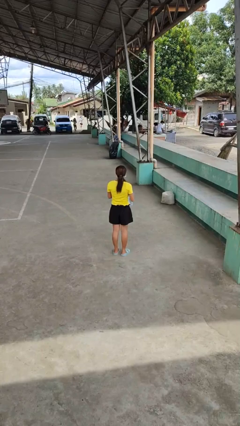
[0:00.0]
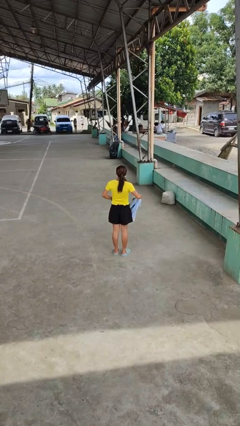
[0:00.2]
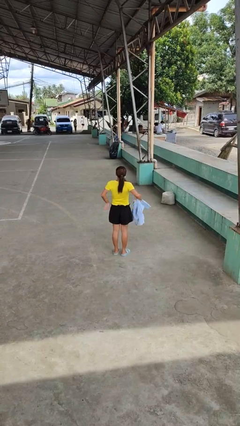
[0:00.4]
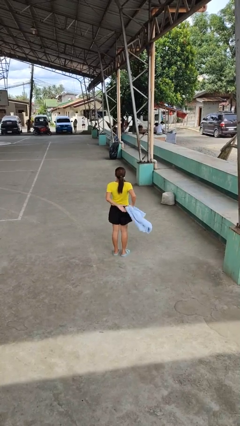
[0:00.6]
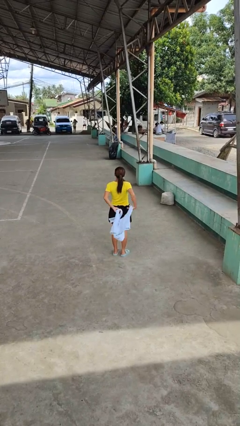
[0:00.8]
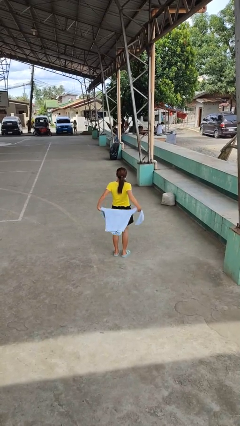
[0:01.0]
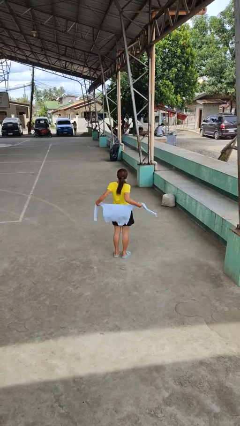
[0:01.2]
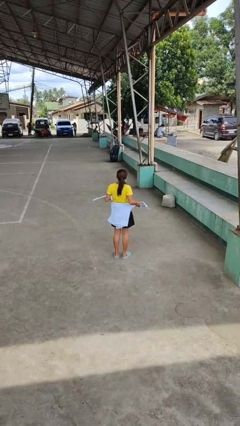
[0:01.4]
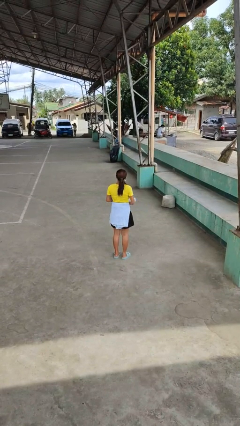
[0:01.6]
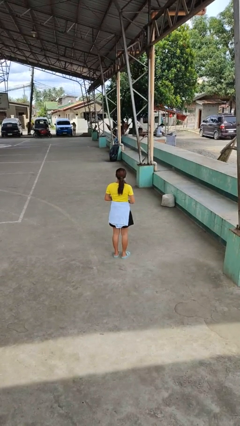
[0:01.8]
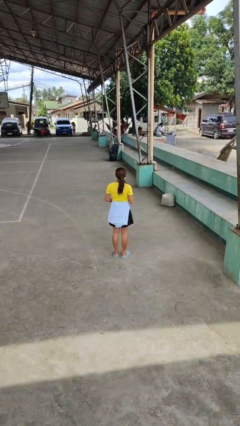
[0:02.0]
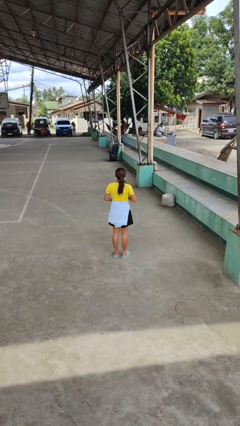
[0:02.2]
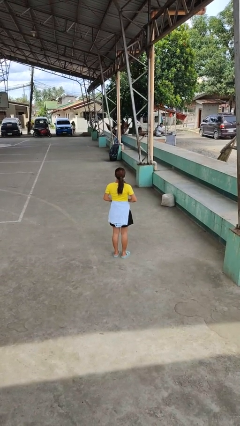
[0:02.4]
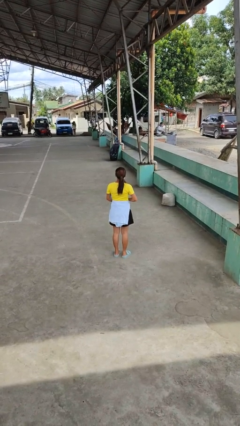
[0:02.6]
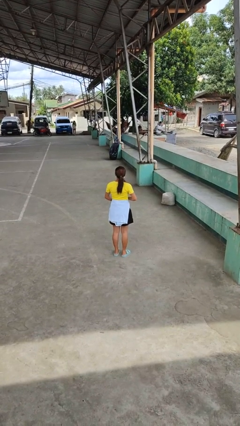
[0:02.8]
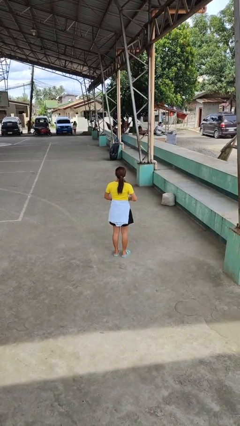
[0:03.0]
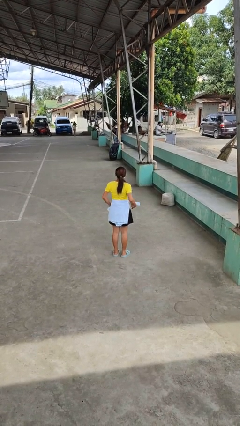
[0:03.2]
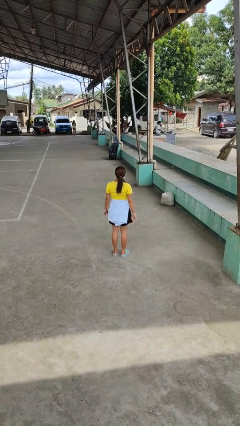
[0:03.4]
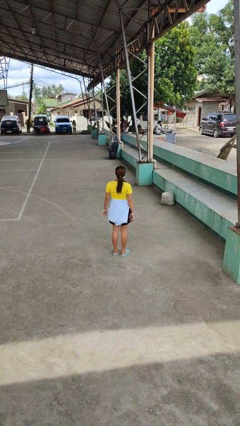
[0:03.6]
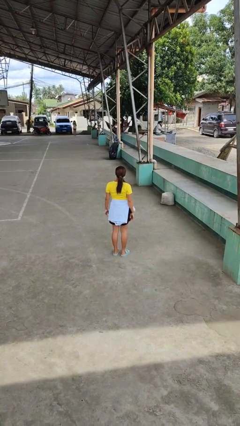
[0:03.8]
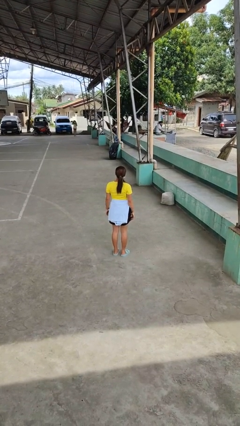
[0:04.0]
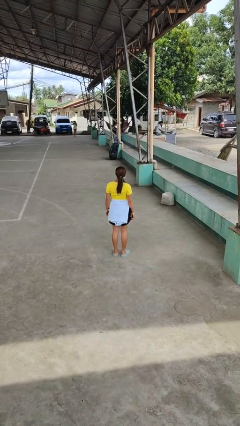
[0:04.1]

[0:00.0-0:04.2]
person ties jacket around waist

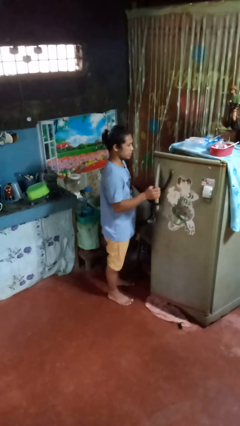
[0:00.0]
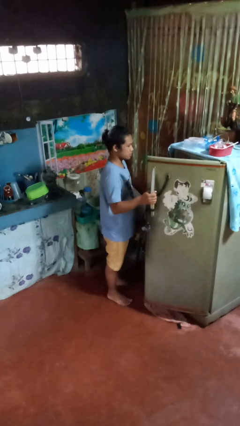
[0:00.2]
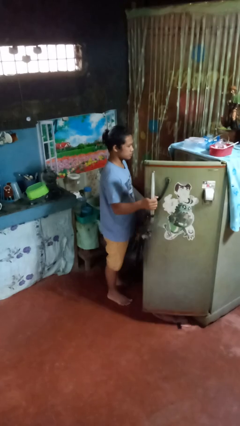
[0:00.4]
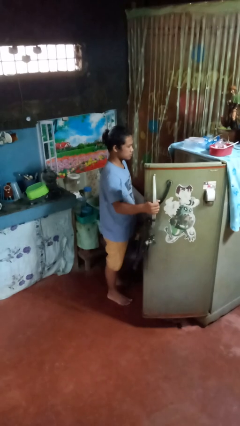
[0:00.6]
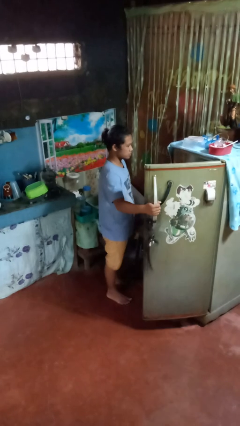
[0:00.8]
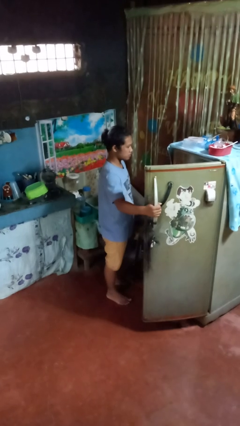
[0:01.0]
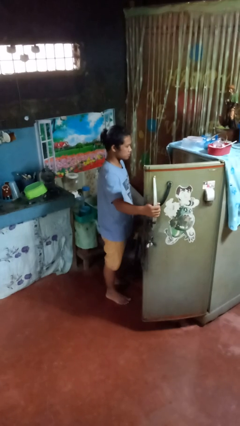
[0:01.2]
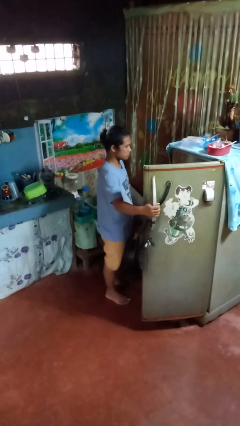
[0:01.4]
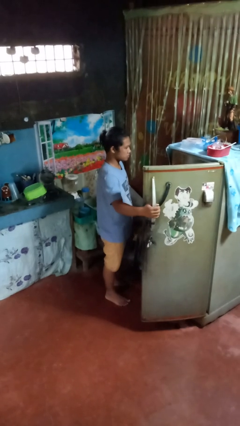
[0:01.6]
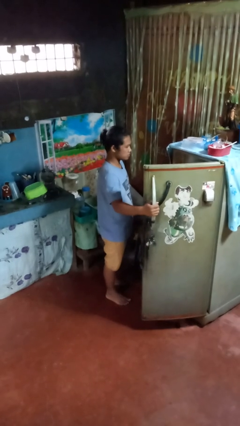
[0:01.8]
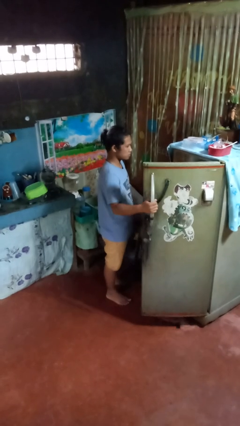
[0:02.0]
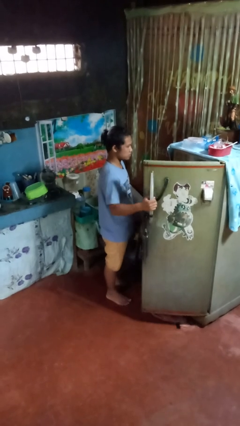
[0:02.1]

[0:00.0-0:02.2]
person opens refrigerator

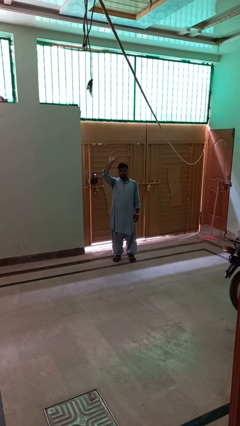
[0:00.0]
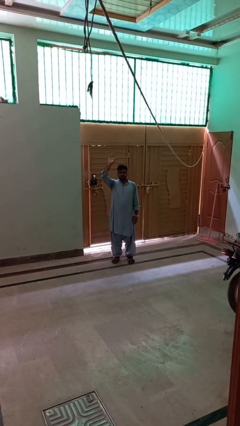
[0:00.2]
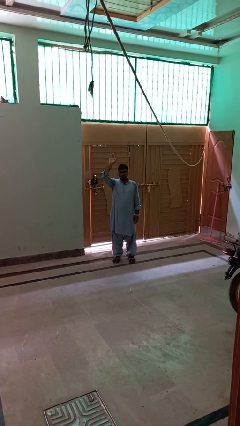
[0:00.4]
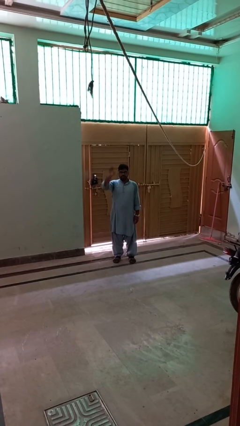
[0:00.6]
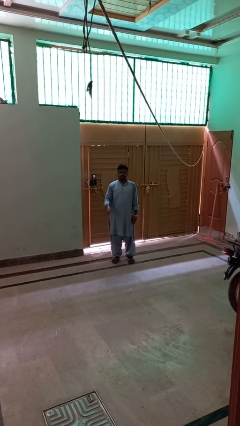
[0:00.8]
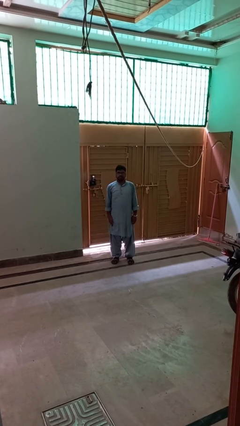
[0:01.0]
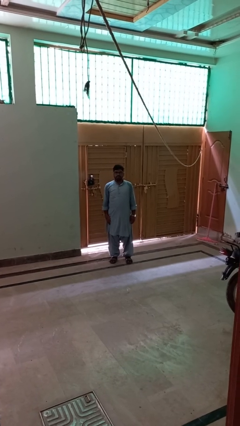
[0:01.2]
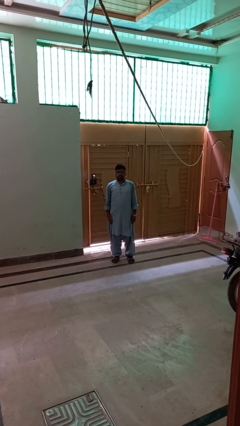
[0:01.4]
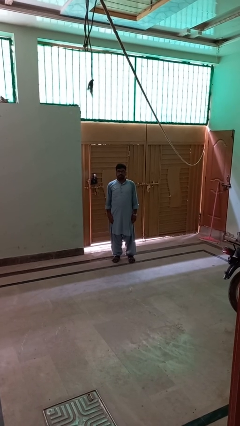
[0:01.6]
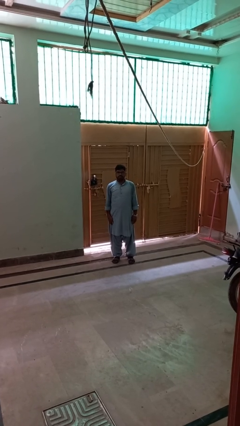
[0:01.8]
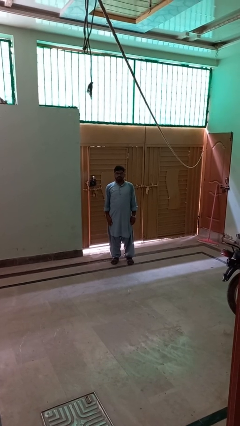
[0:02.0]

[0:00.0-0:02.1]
person gestures lower hand

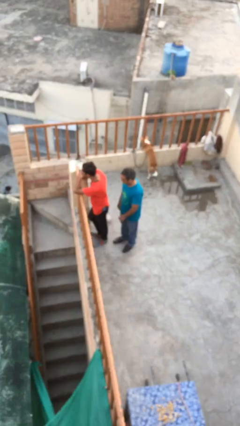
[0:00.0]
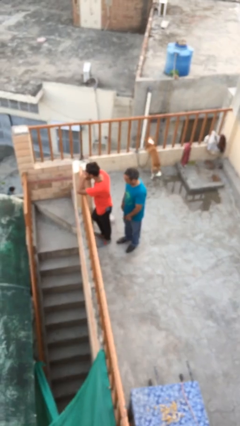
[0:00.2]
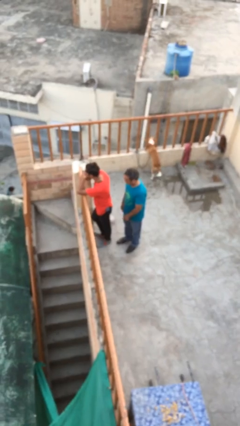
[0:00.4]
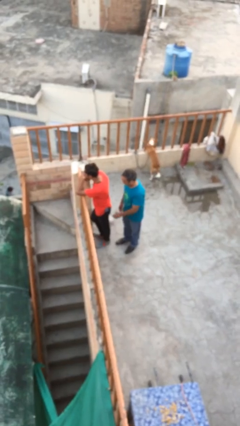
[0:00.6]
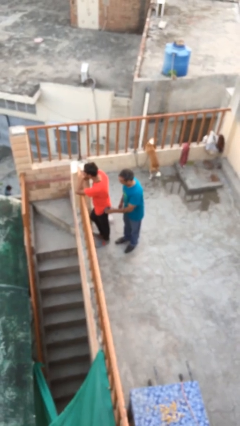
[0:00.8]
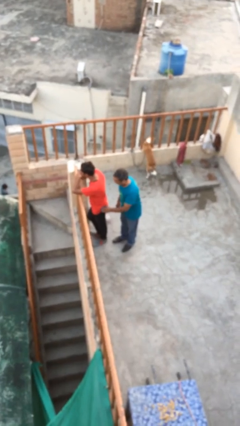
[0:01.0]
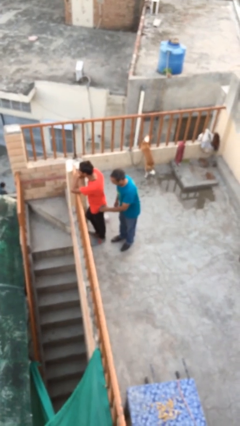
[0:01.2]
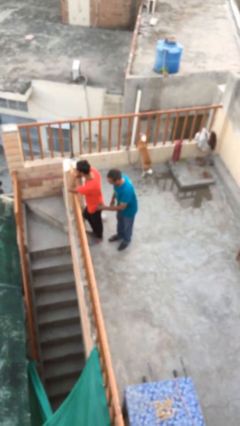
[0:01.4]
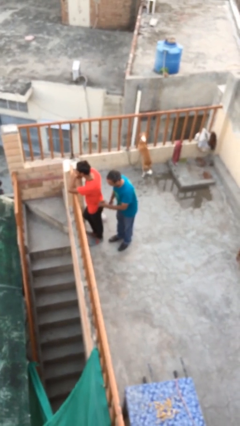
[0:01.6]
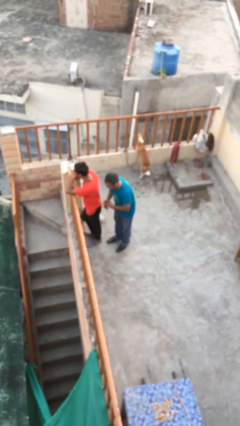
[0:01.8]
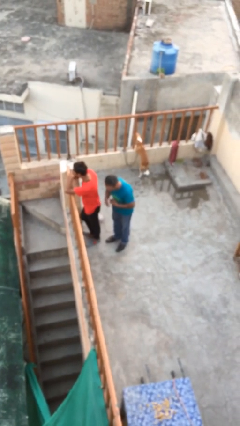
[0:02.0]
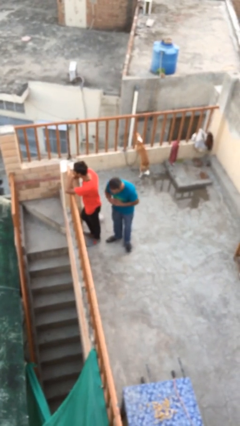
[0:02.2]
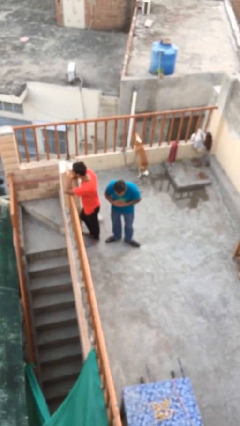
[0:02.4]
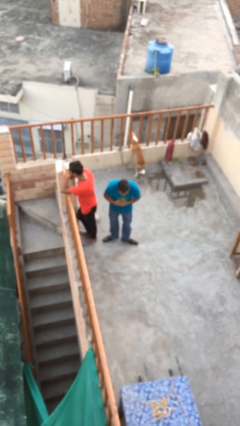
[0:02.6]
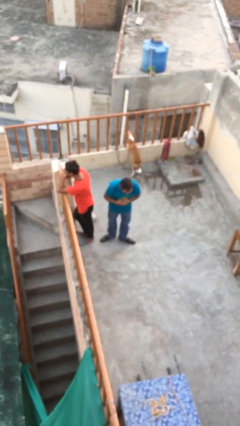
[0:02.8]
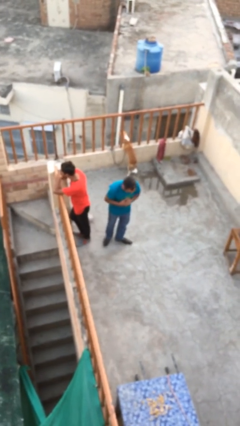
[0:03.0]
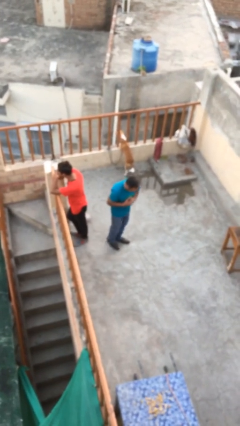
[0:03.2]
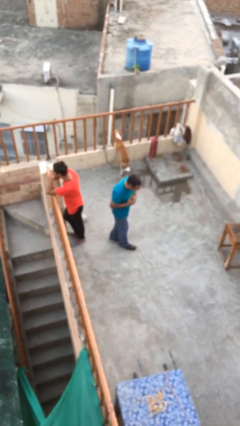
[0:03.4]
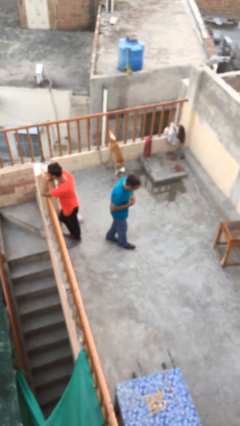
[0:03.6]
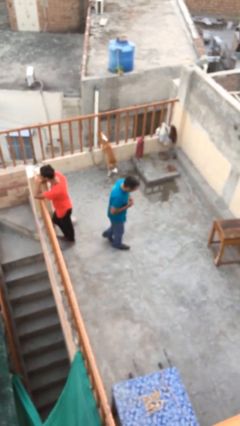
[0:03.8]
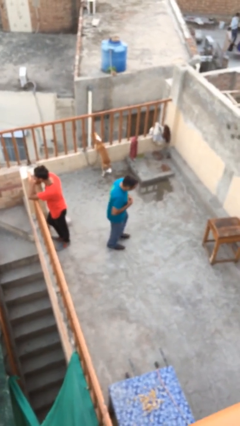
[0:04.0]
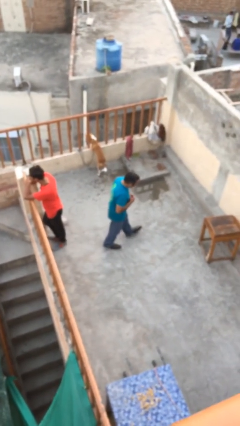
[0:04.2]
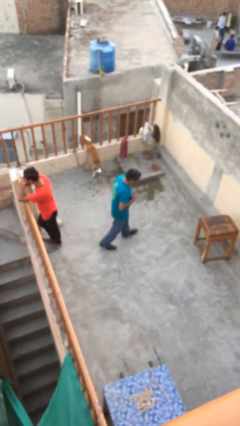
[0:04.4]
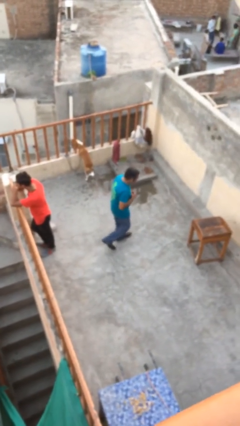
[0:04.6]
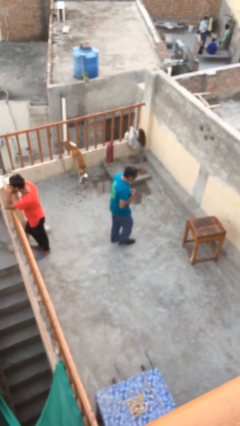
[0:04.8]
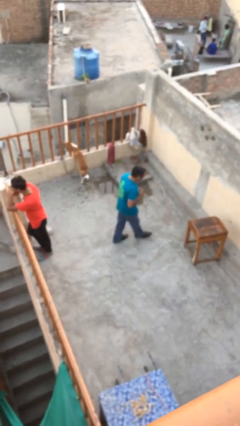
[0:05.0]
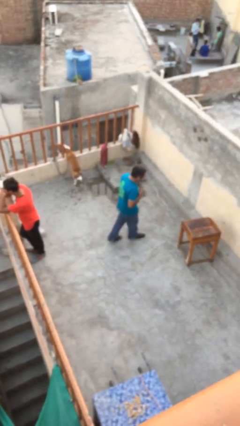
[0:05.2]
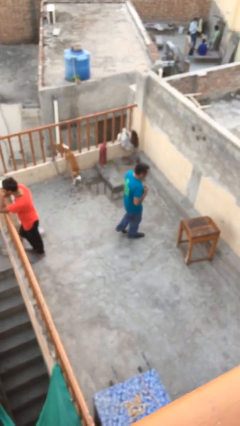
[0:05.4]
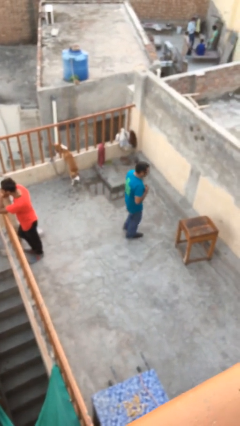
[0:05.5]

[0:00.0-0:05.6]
person steals object from person

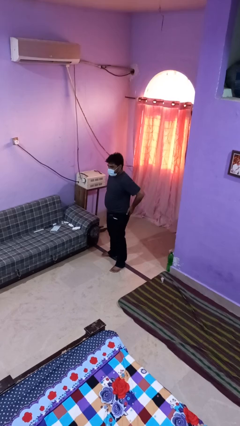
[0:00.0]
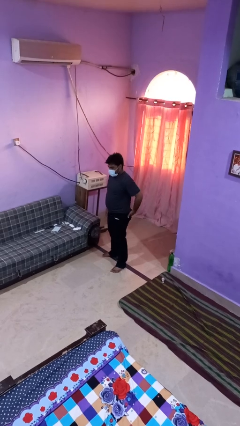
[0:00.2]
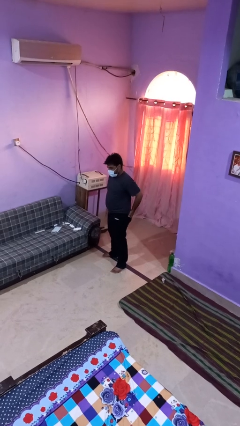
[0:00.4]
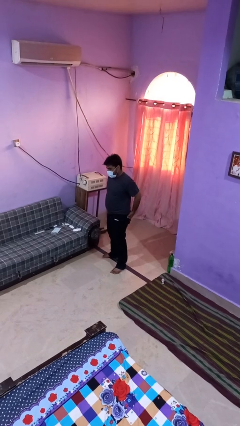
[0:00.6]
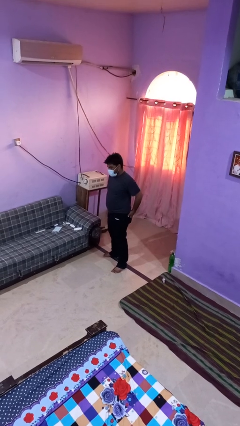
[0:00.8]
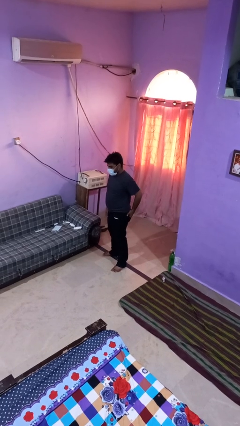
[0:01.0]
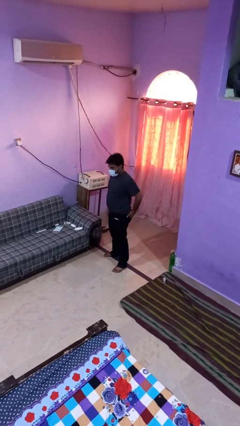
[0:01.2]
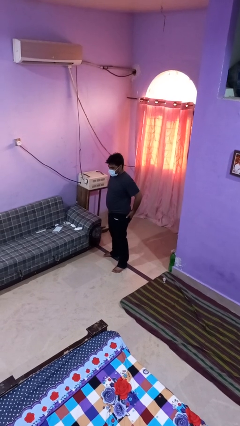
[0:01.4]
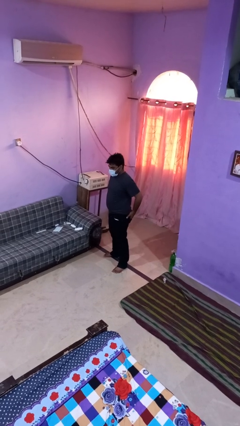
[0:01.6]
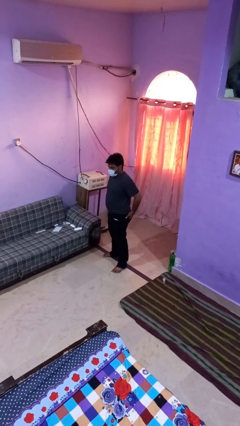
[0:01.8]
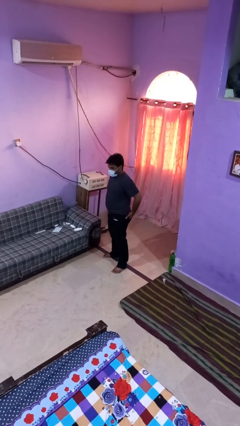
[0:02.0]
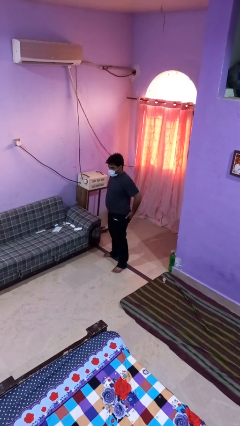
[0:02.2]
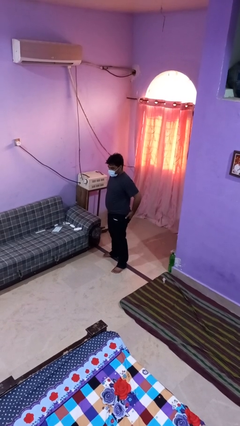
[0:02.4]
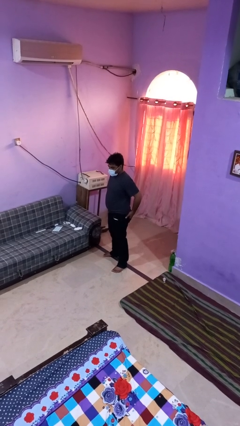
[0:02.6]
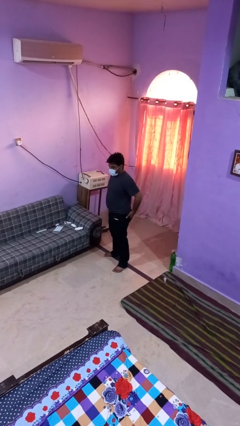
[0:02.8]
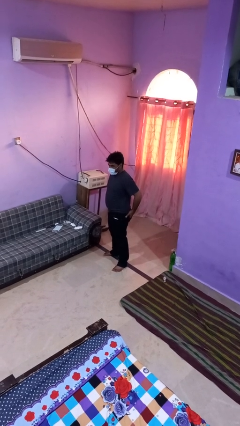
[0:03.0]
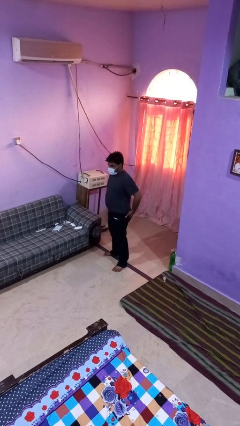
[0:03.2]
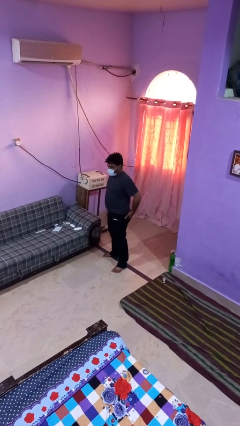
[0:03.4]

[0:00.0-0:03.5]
person puts hands in back pockets
